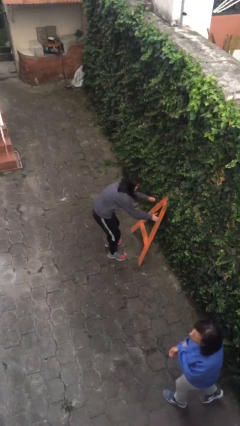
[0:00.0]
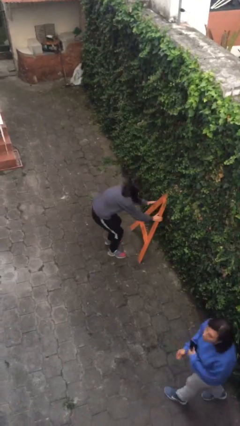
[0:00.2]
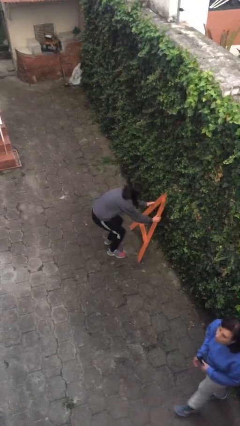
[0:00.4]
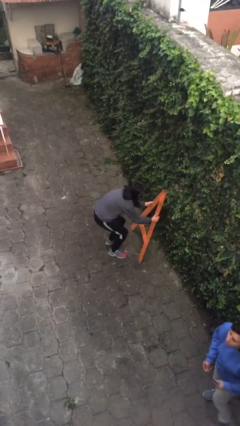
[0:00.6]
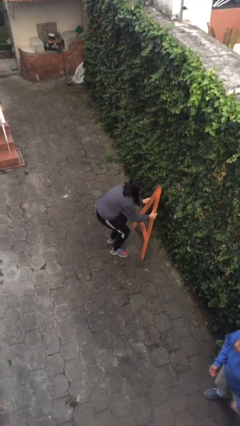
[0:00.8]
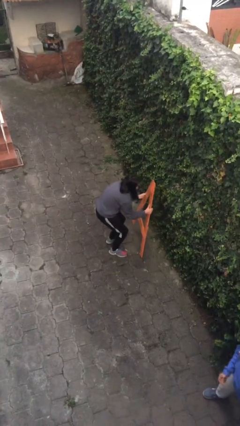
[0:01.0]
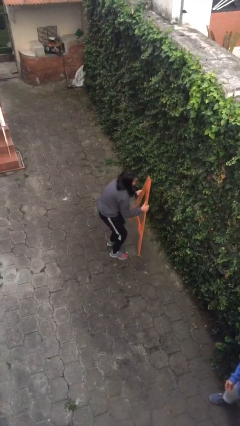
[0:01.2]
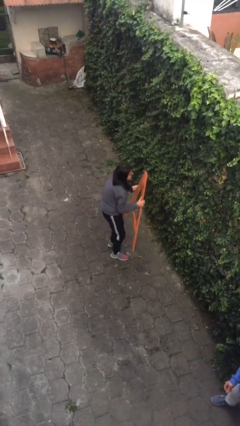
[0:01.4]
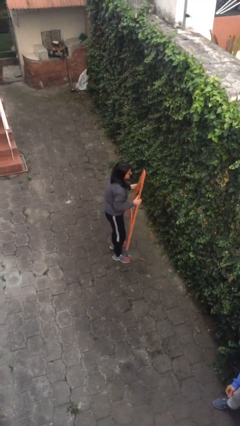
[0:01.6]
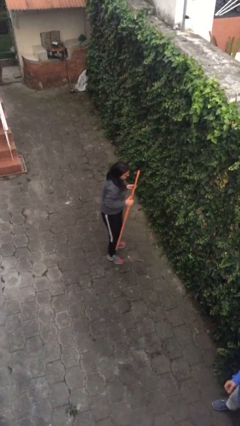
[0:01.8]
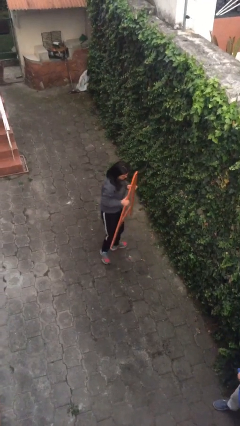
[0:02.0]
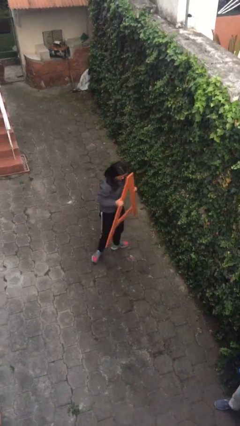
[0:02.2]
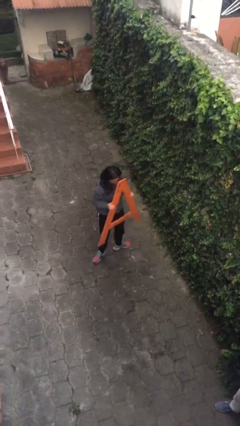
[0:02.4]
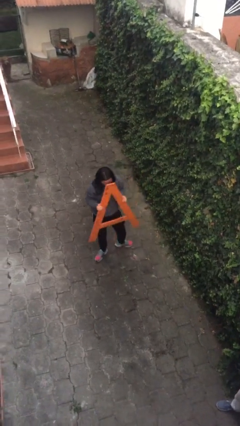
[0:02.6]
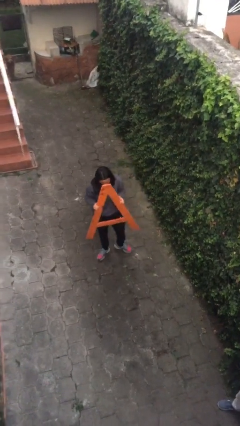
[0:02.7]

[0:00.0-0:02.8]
person picks up object from floor

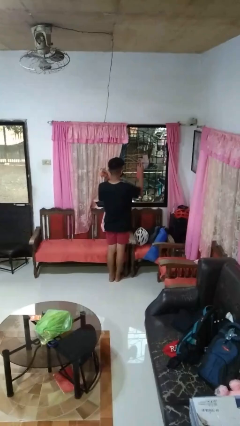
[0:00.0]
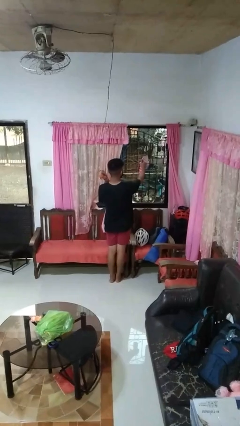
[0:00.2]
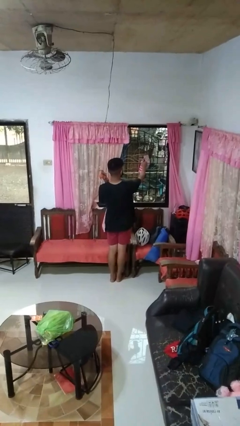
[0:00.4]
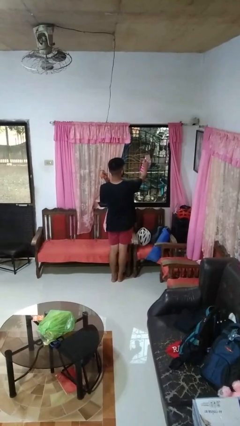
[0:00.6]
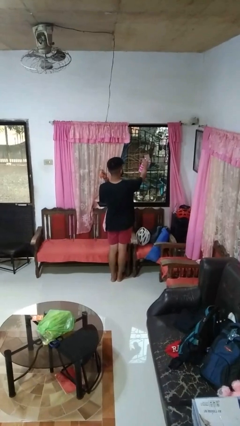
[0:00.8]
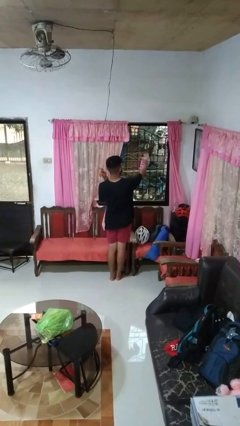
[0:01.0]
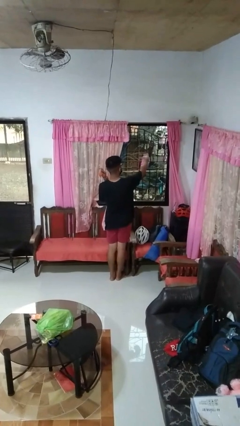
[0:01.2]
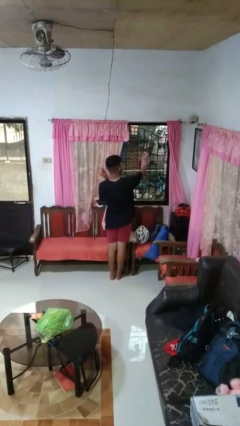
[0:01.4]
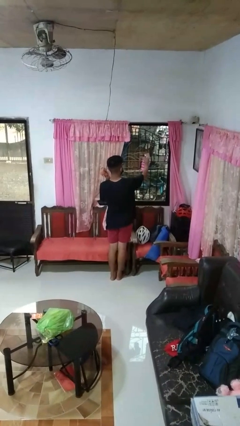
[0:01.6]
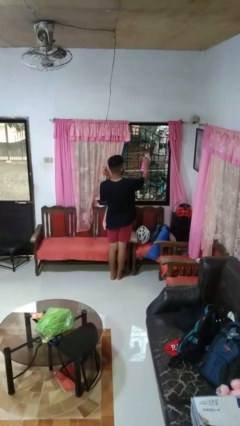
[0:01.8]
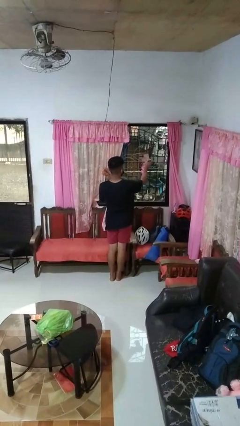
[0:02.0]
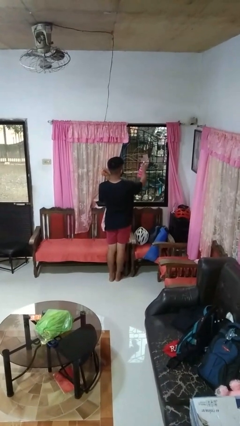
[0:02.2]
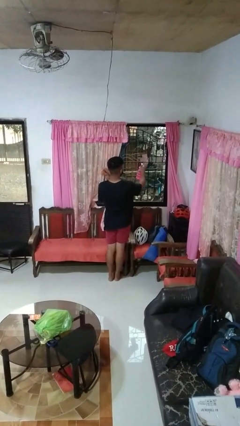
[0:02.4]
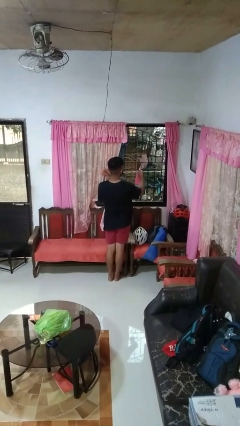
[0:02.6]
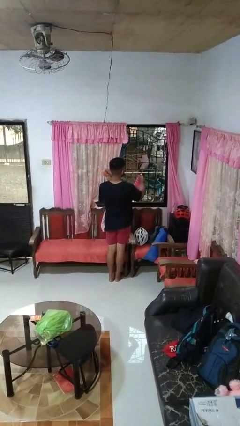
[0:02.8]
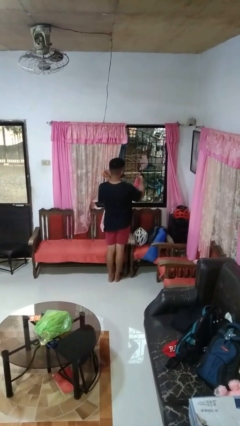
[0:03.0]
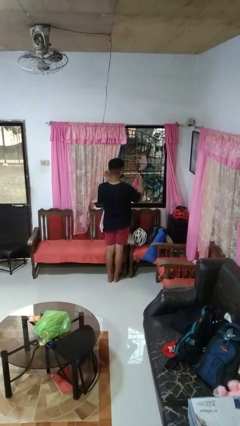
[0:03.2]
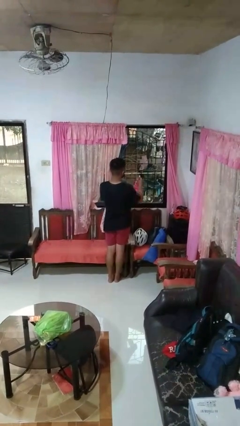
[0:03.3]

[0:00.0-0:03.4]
person sprays from bottle

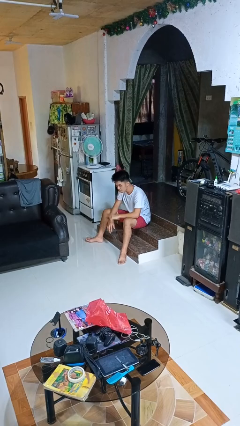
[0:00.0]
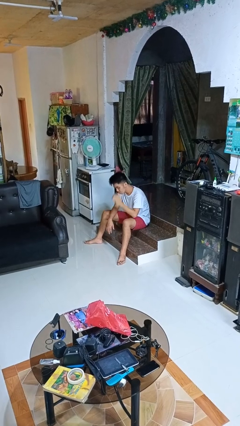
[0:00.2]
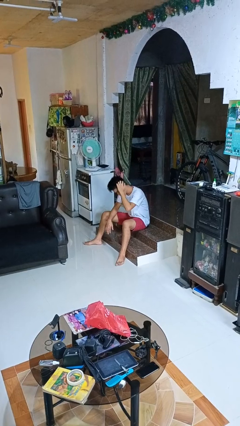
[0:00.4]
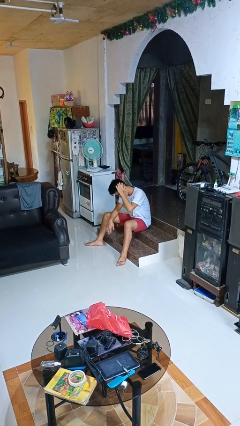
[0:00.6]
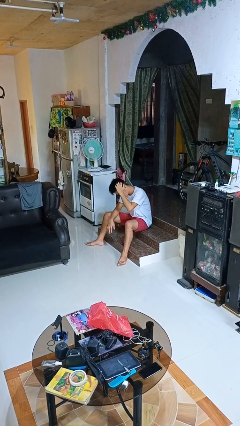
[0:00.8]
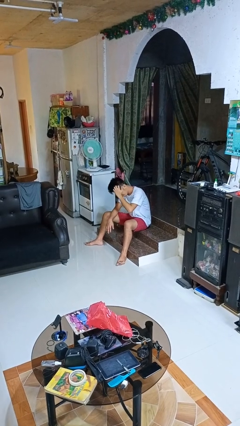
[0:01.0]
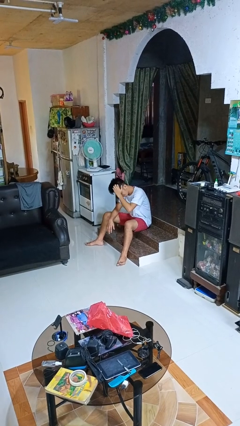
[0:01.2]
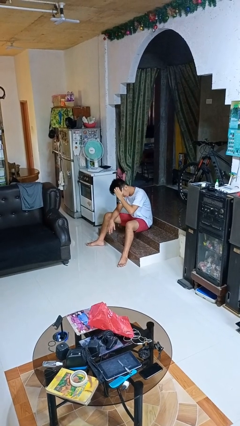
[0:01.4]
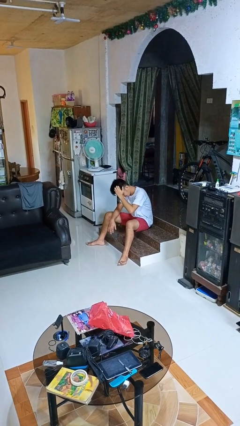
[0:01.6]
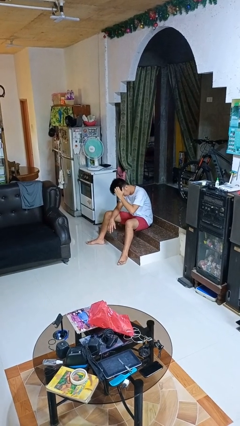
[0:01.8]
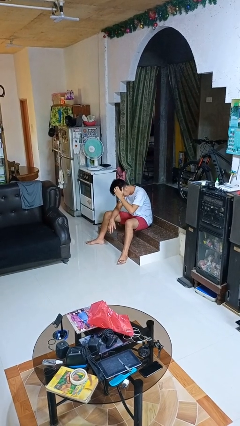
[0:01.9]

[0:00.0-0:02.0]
person scratches face

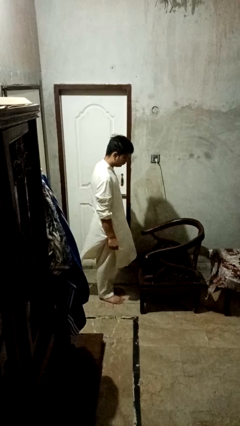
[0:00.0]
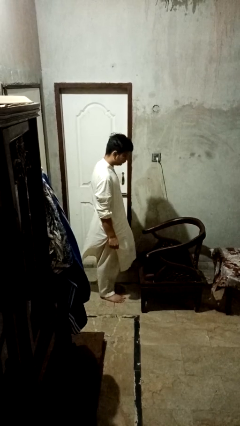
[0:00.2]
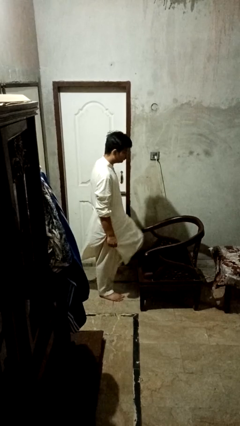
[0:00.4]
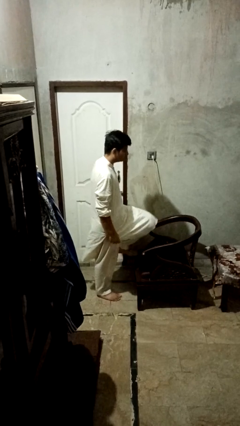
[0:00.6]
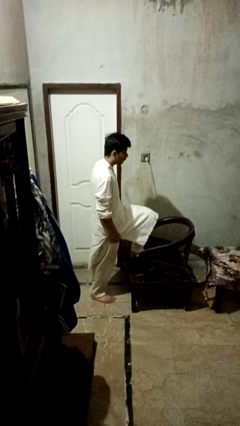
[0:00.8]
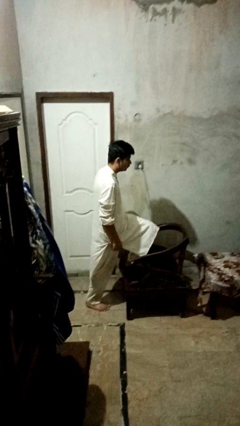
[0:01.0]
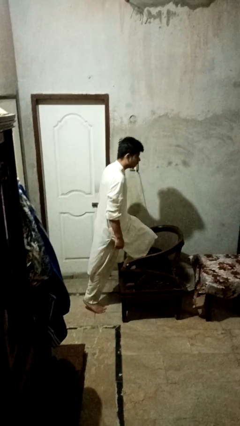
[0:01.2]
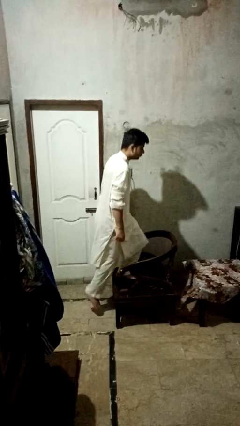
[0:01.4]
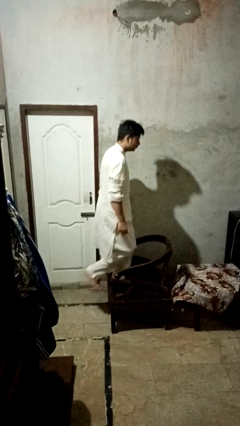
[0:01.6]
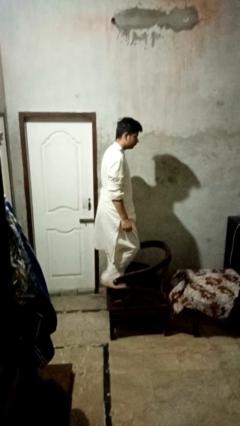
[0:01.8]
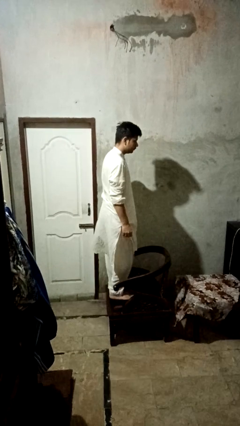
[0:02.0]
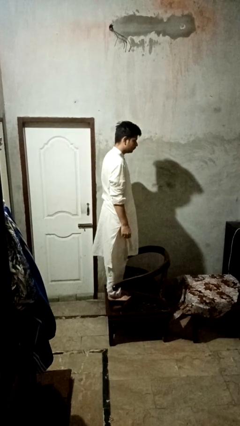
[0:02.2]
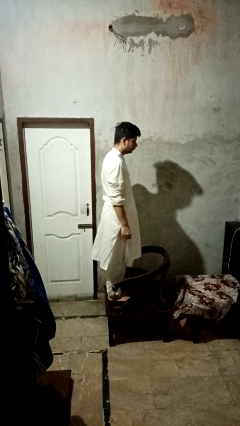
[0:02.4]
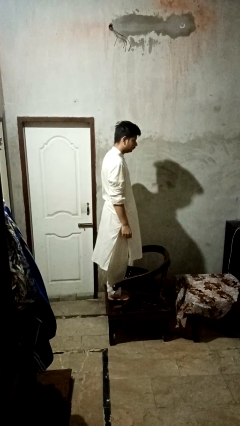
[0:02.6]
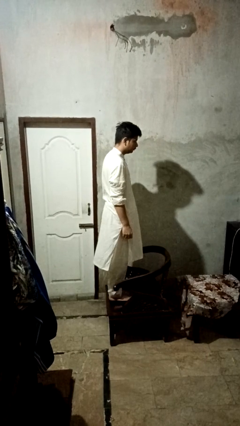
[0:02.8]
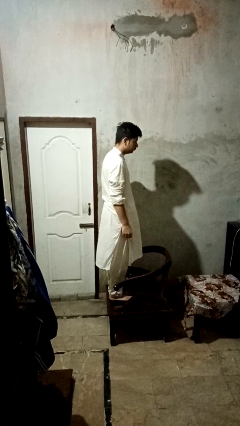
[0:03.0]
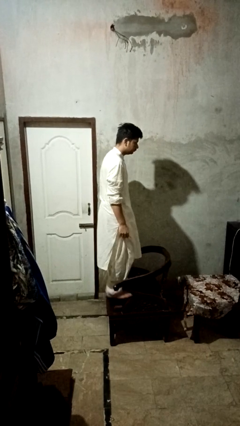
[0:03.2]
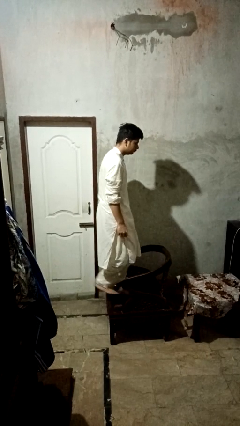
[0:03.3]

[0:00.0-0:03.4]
person climbs on couch

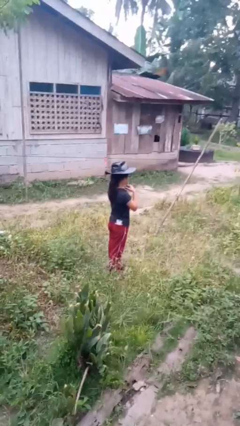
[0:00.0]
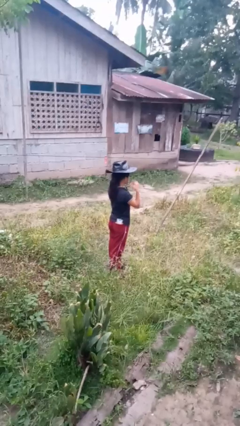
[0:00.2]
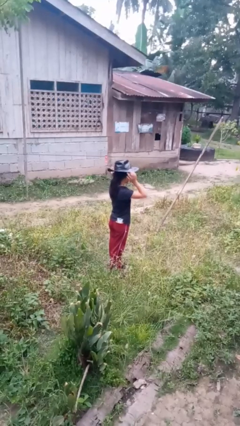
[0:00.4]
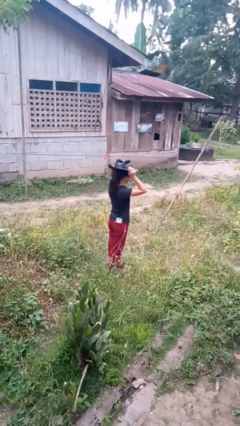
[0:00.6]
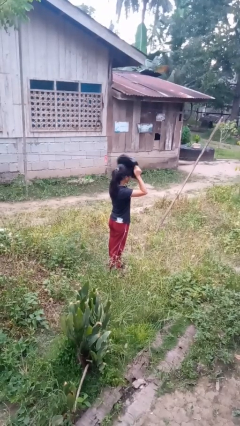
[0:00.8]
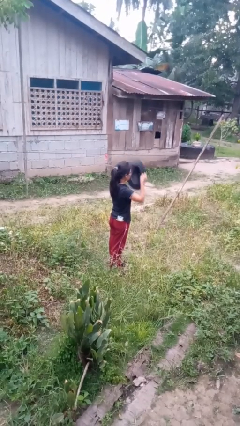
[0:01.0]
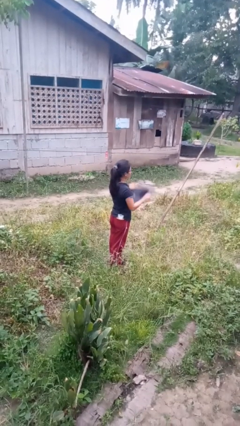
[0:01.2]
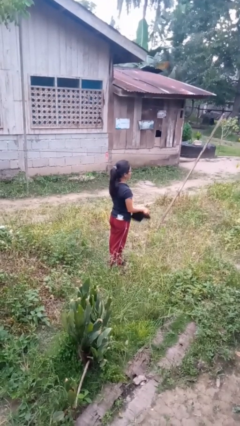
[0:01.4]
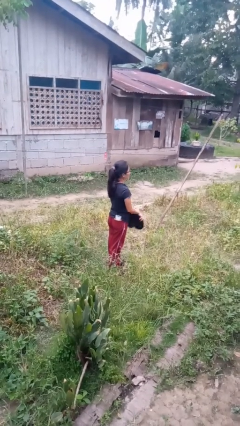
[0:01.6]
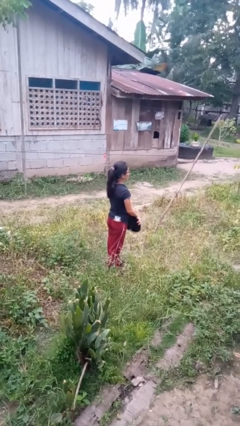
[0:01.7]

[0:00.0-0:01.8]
person takes off hat

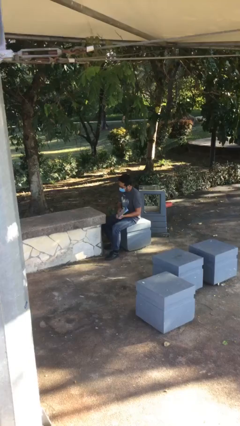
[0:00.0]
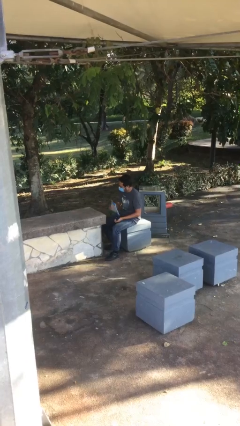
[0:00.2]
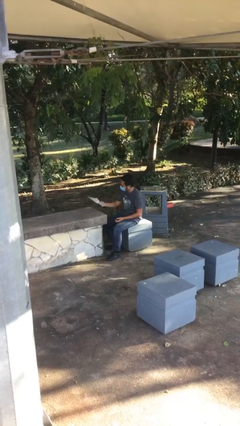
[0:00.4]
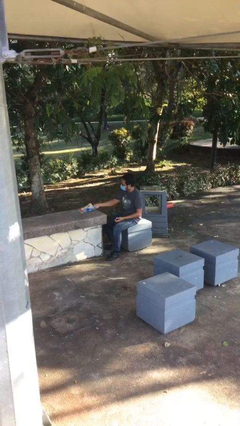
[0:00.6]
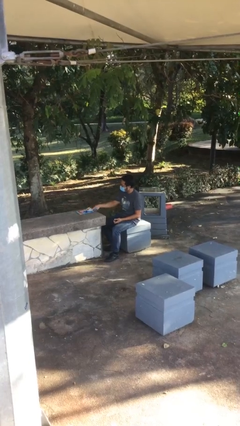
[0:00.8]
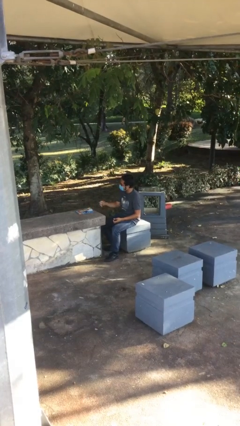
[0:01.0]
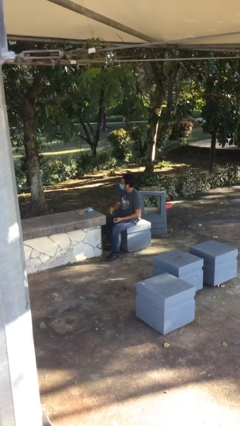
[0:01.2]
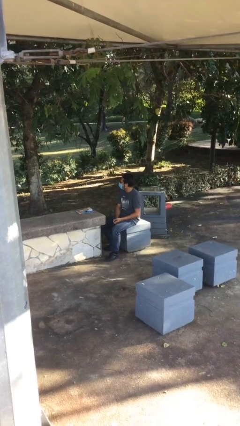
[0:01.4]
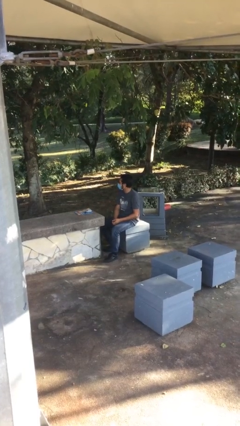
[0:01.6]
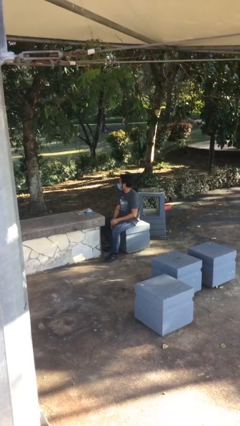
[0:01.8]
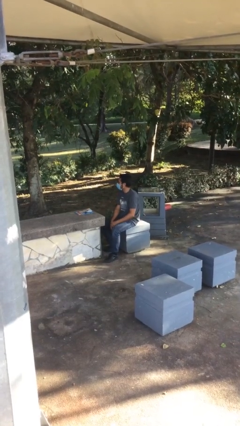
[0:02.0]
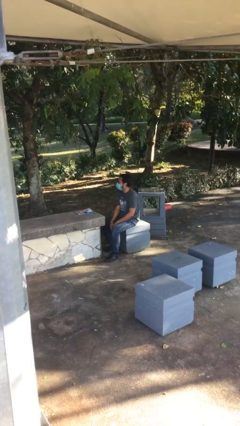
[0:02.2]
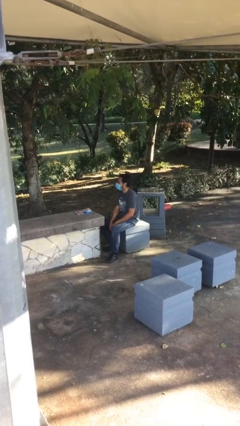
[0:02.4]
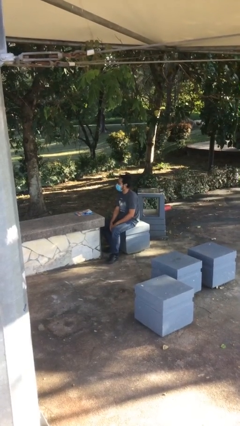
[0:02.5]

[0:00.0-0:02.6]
person puts down object on table

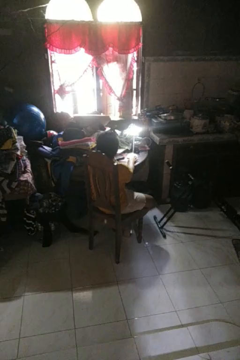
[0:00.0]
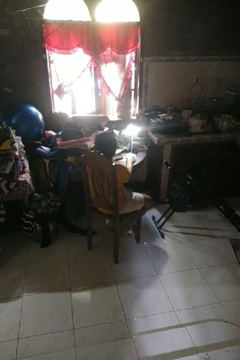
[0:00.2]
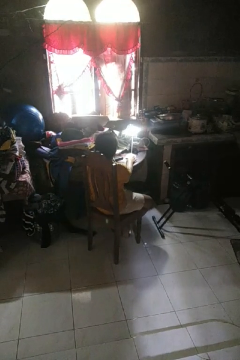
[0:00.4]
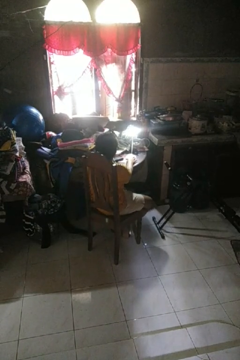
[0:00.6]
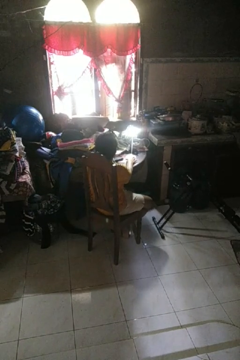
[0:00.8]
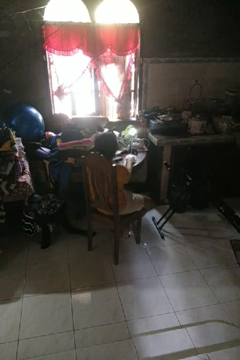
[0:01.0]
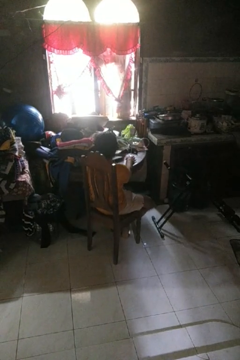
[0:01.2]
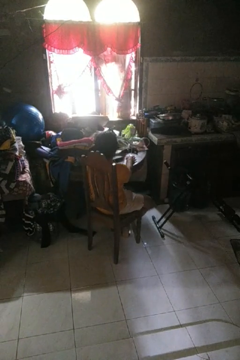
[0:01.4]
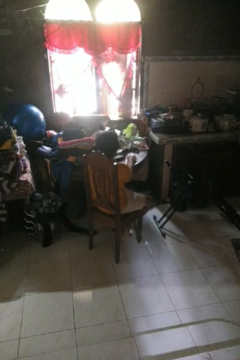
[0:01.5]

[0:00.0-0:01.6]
person turns off lamp
